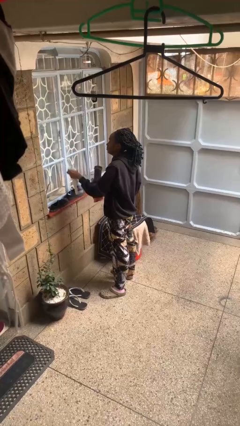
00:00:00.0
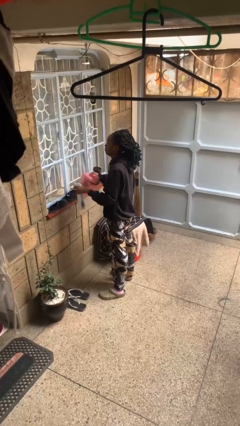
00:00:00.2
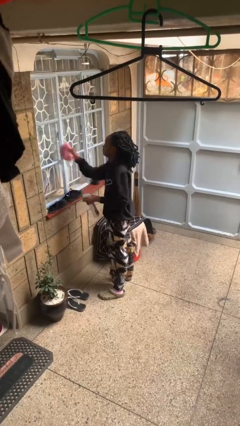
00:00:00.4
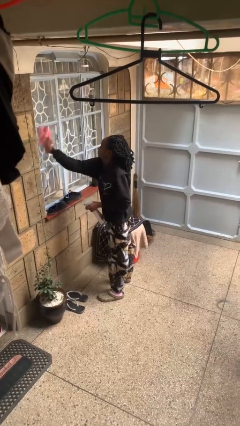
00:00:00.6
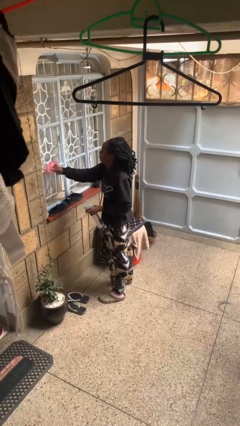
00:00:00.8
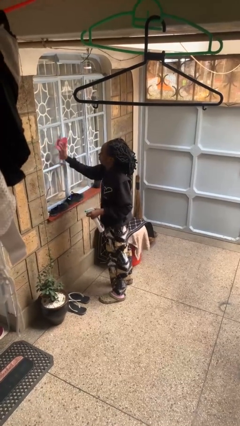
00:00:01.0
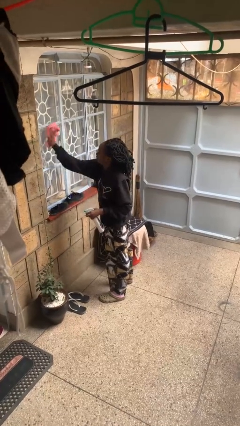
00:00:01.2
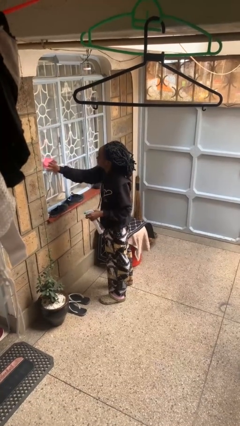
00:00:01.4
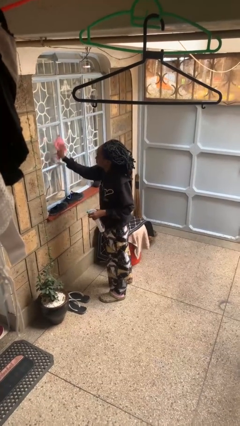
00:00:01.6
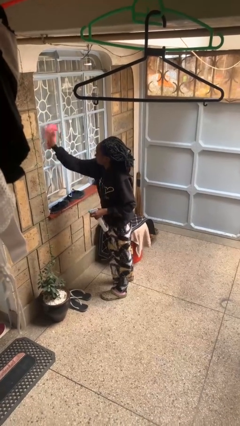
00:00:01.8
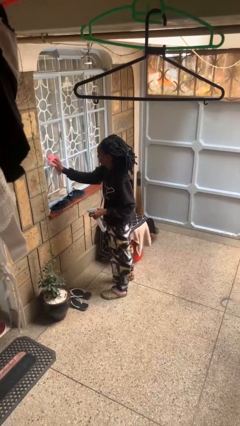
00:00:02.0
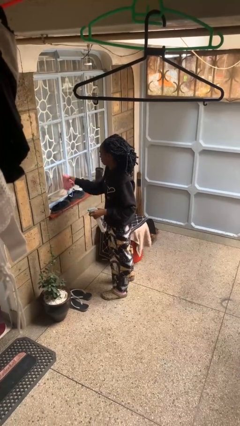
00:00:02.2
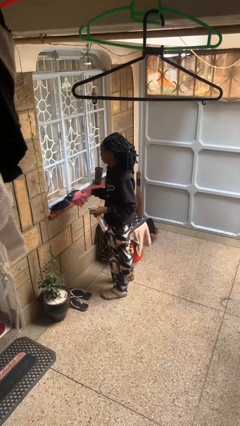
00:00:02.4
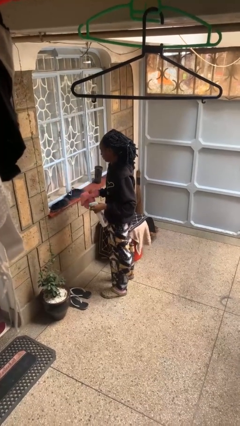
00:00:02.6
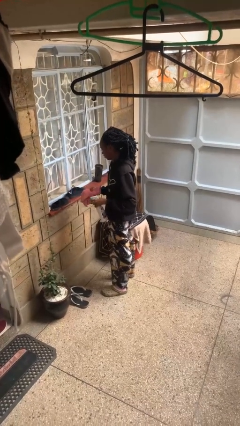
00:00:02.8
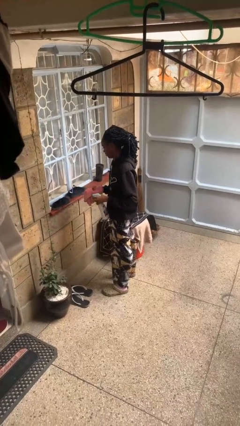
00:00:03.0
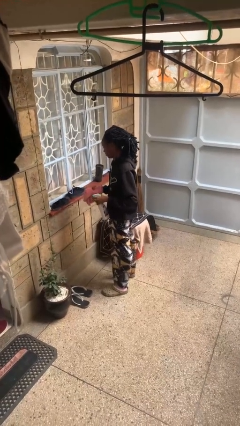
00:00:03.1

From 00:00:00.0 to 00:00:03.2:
person washes window

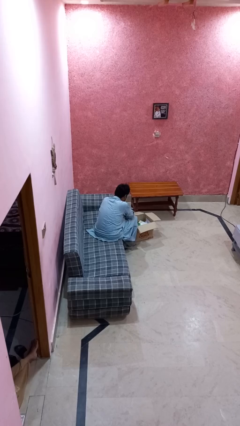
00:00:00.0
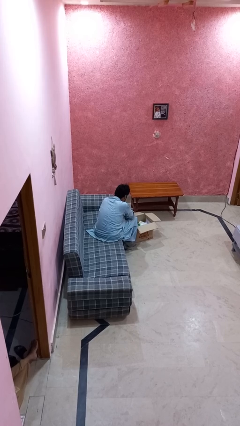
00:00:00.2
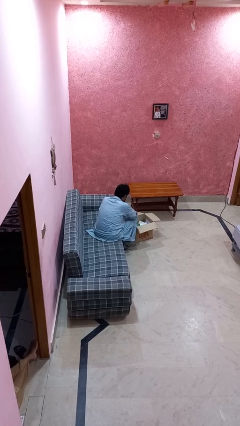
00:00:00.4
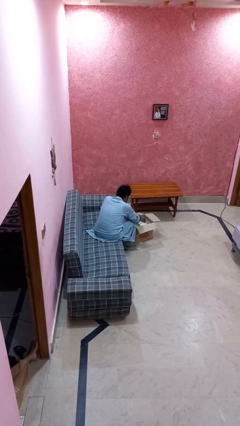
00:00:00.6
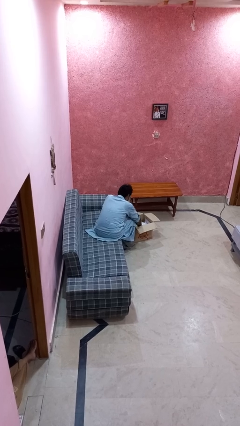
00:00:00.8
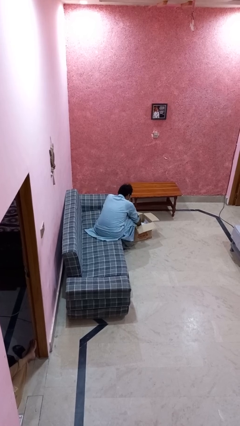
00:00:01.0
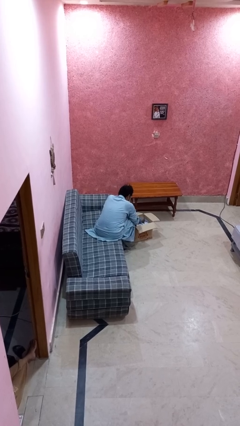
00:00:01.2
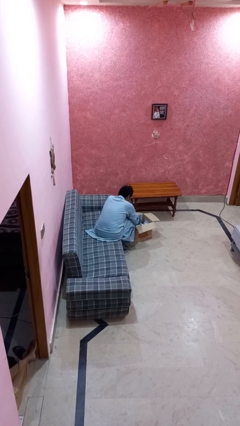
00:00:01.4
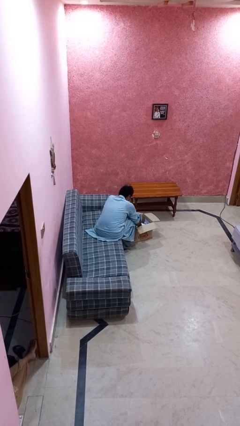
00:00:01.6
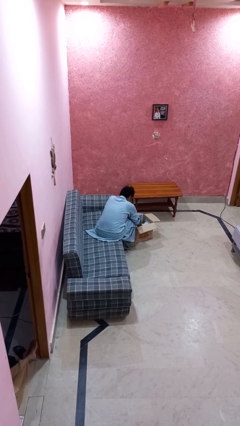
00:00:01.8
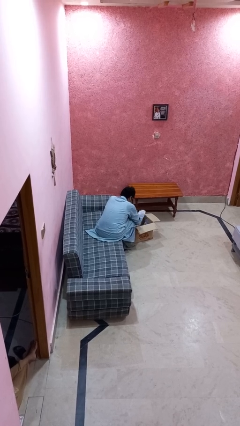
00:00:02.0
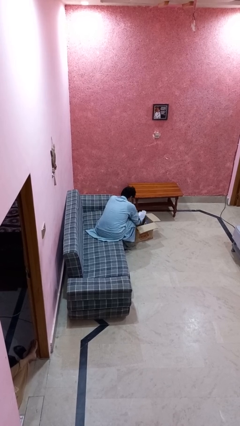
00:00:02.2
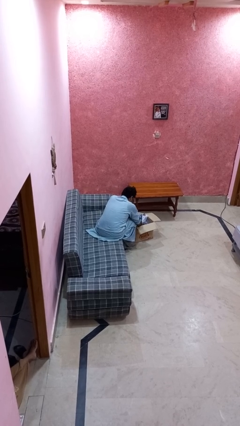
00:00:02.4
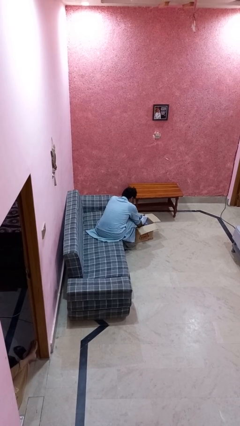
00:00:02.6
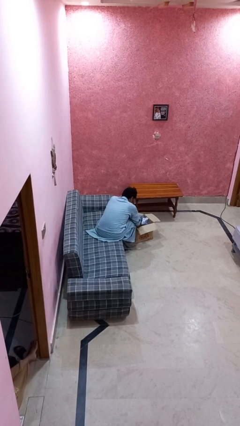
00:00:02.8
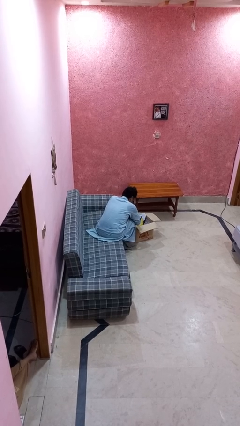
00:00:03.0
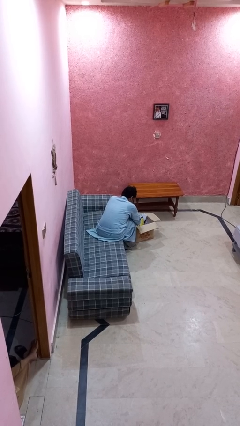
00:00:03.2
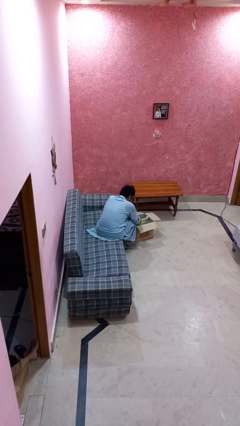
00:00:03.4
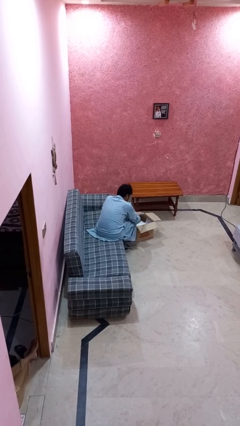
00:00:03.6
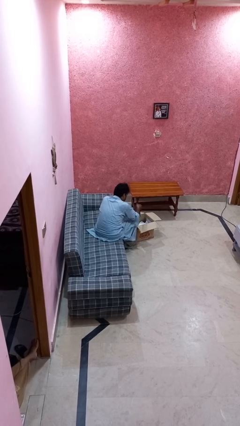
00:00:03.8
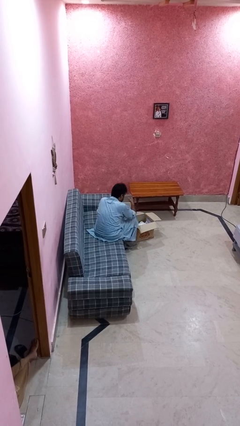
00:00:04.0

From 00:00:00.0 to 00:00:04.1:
person searches in box

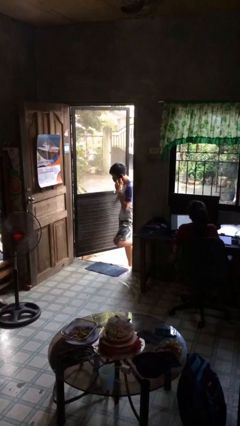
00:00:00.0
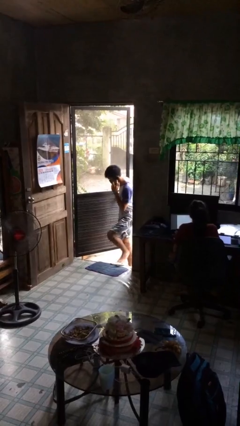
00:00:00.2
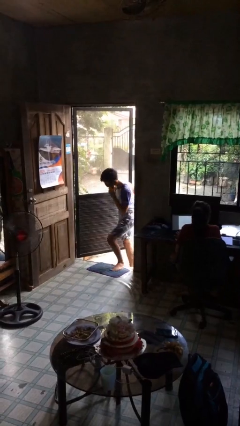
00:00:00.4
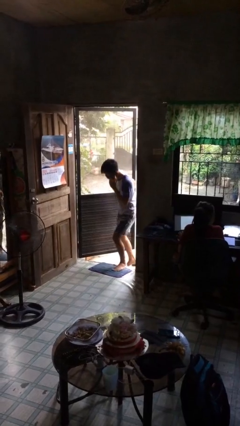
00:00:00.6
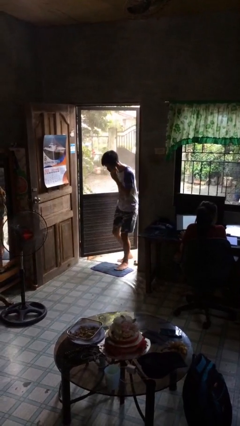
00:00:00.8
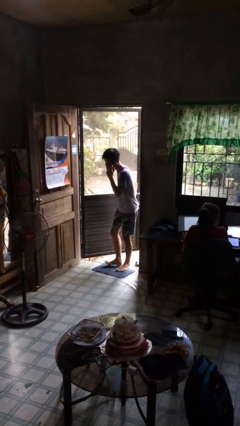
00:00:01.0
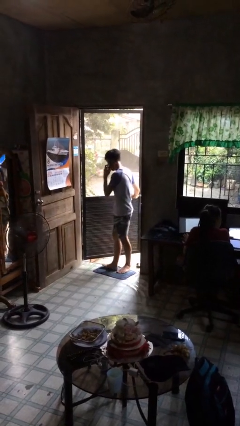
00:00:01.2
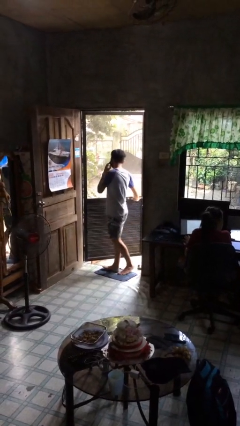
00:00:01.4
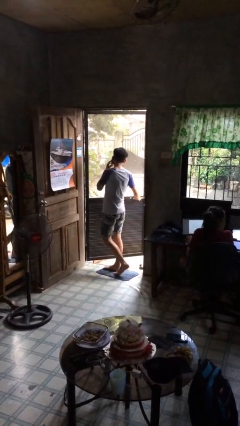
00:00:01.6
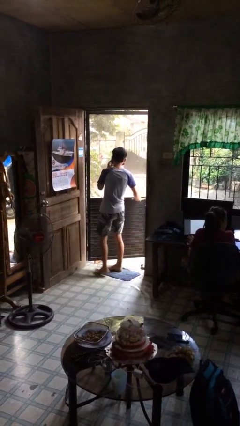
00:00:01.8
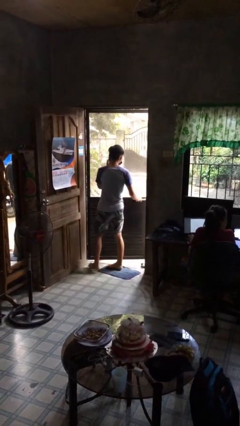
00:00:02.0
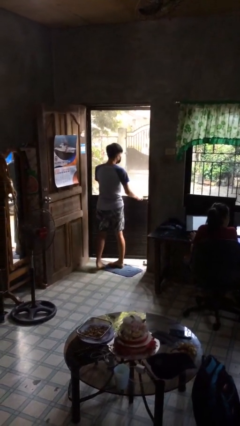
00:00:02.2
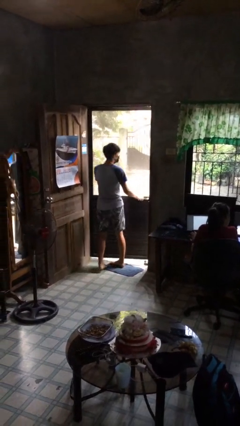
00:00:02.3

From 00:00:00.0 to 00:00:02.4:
person enters scene through structure

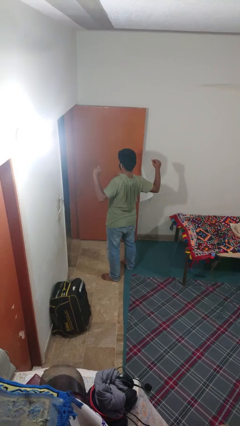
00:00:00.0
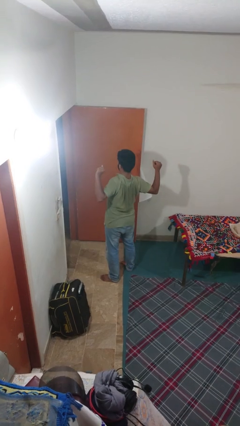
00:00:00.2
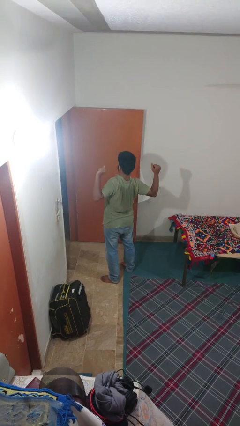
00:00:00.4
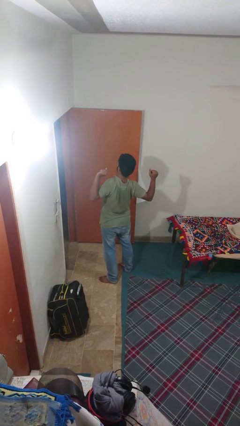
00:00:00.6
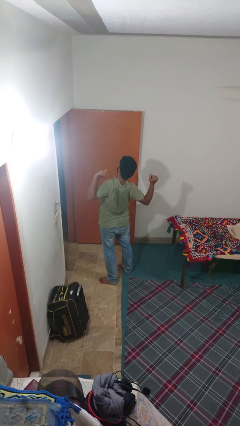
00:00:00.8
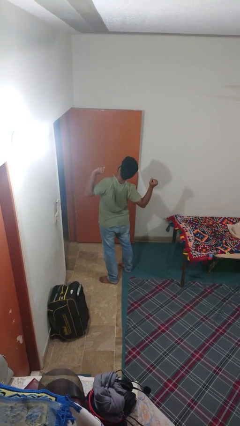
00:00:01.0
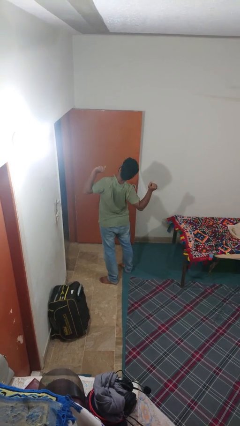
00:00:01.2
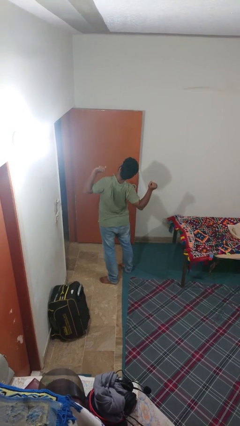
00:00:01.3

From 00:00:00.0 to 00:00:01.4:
person stretches arms to side

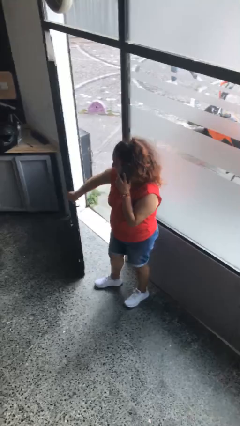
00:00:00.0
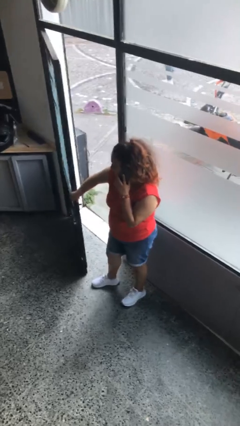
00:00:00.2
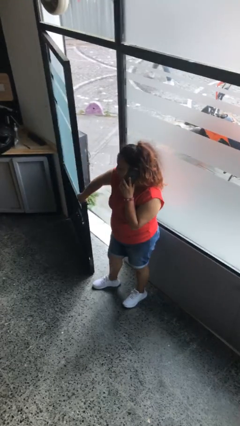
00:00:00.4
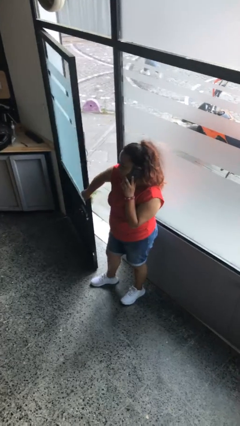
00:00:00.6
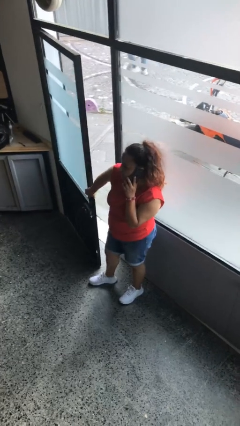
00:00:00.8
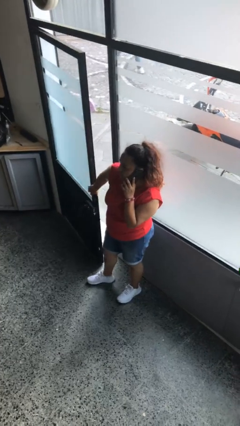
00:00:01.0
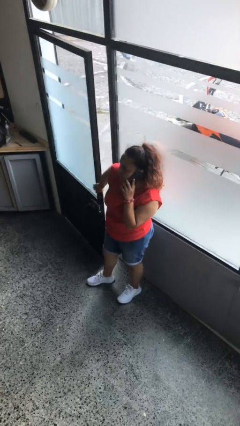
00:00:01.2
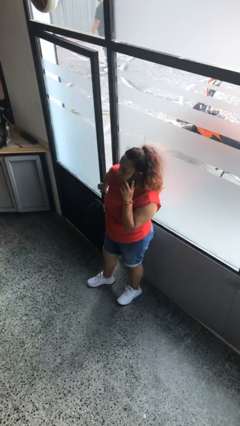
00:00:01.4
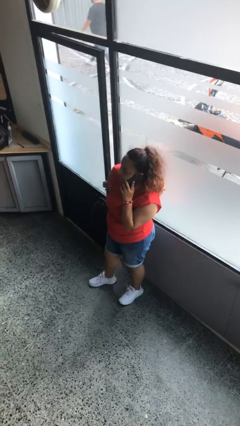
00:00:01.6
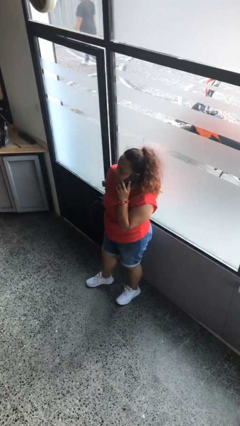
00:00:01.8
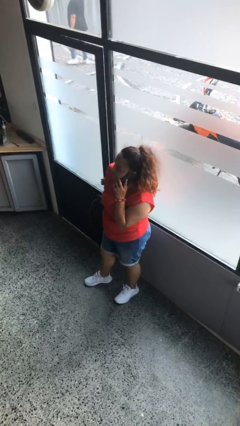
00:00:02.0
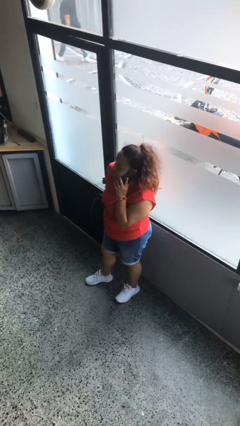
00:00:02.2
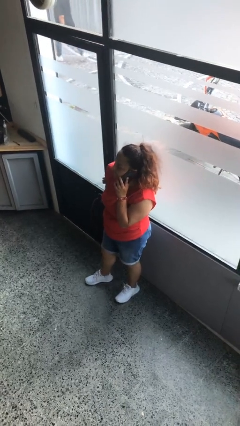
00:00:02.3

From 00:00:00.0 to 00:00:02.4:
person closes facility door

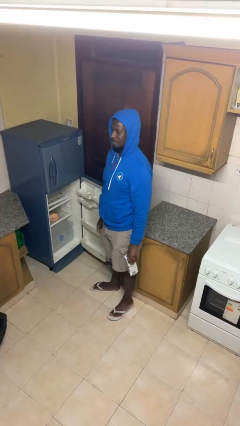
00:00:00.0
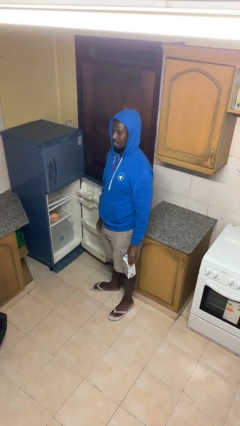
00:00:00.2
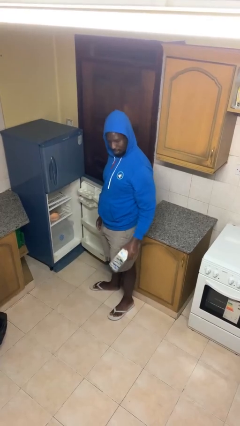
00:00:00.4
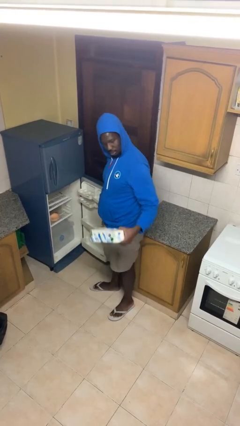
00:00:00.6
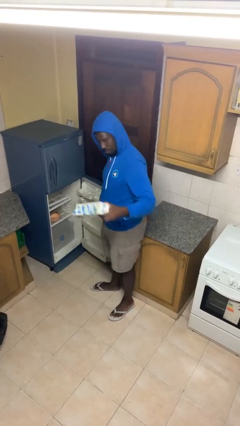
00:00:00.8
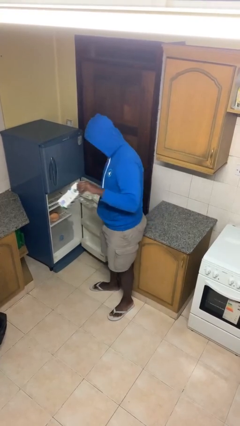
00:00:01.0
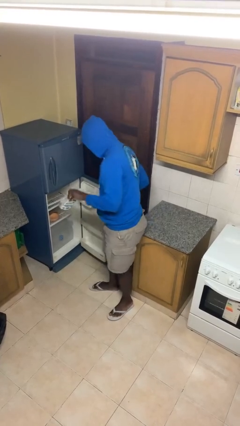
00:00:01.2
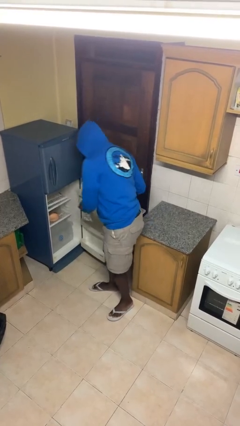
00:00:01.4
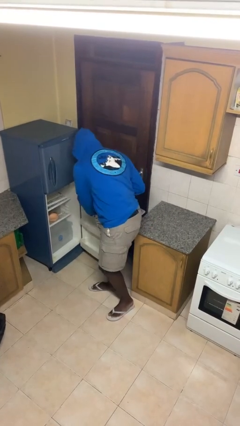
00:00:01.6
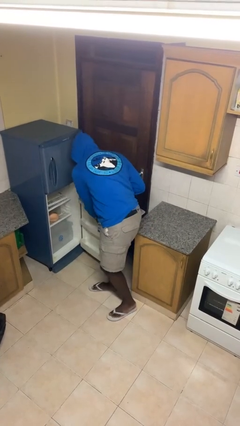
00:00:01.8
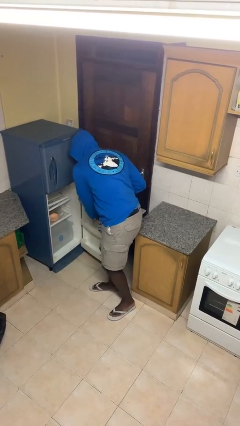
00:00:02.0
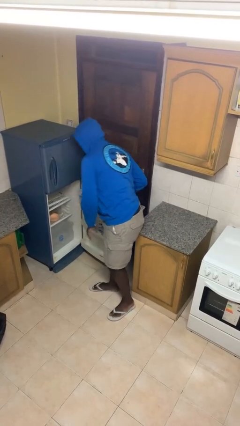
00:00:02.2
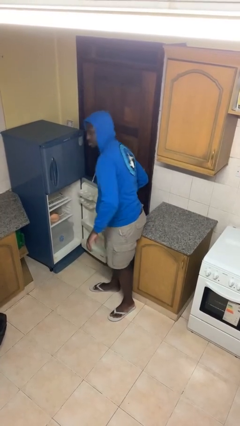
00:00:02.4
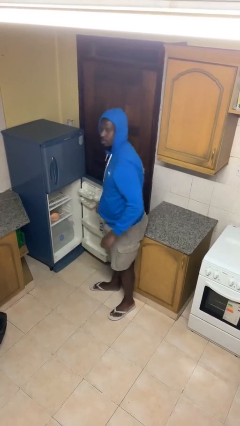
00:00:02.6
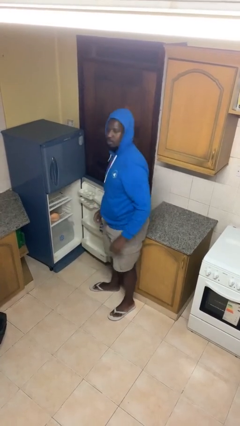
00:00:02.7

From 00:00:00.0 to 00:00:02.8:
person puts object into refrigerator

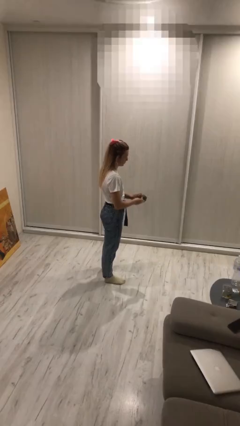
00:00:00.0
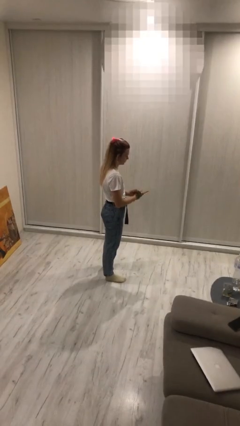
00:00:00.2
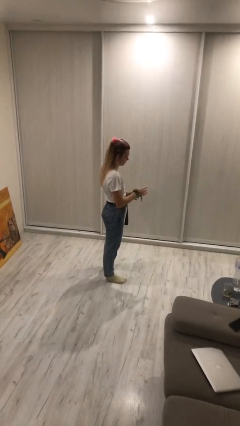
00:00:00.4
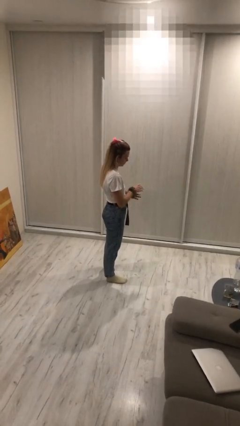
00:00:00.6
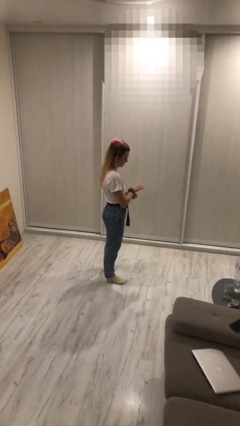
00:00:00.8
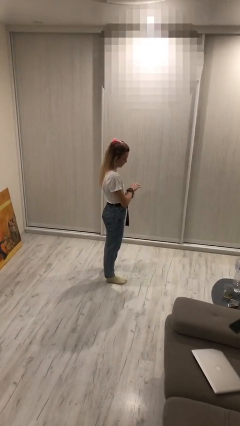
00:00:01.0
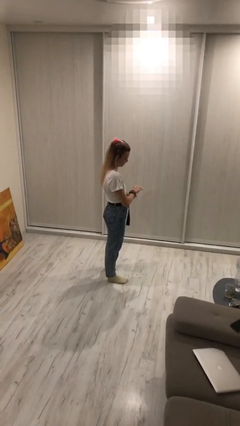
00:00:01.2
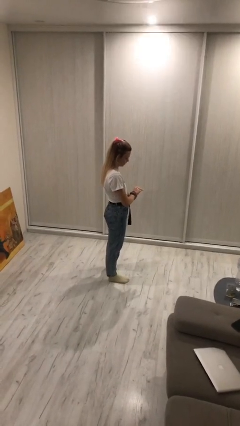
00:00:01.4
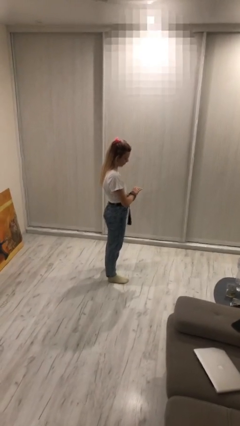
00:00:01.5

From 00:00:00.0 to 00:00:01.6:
person puts on wristwatch
